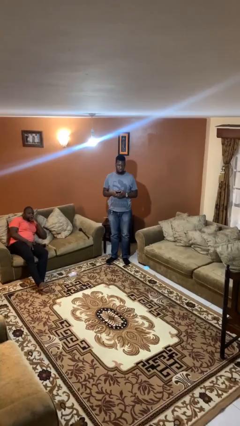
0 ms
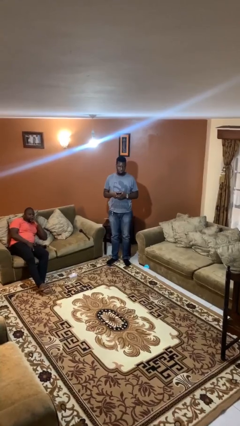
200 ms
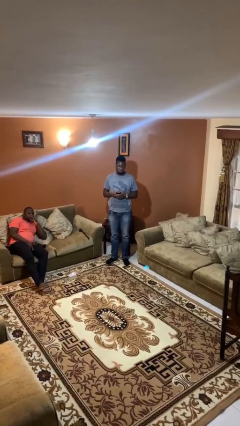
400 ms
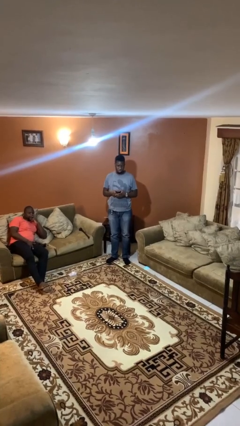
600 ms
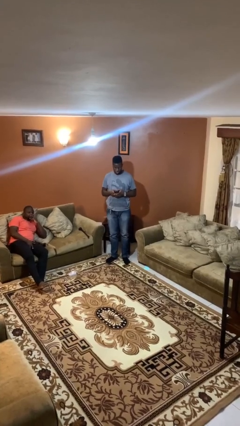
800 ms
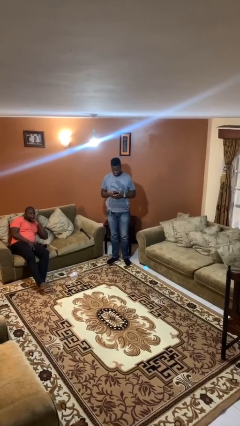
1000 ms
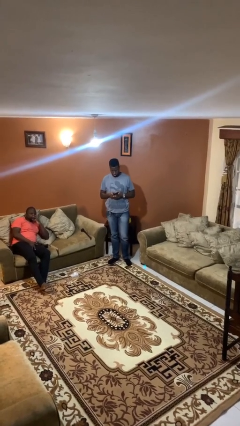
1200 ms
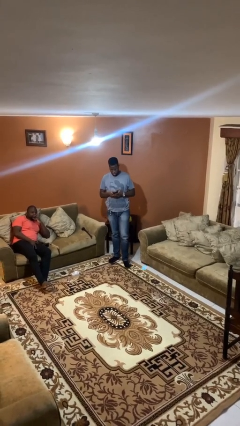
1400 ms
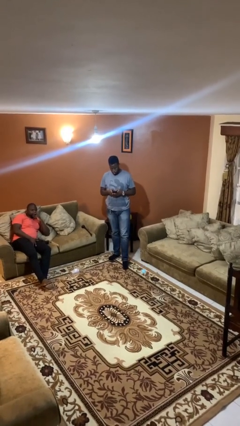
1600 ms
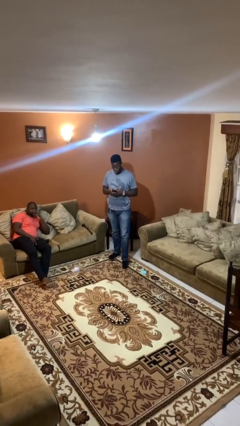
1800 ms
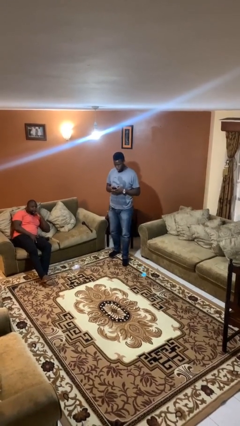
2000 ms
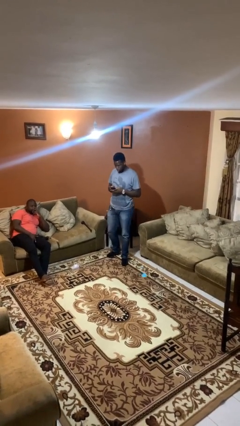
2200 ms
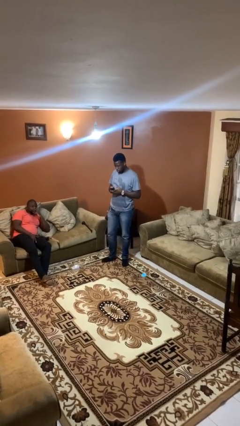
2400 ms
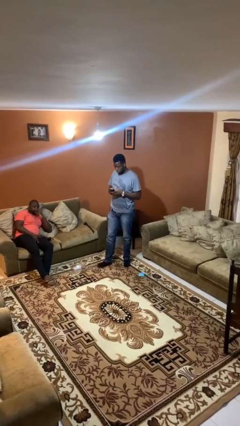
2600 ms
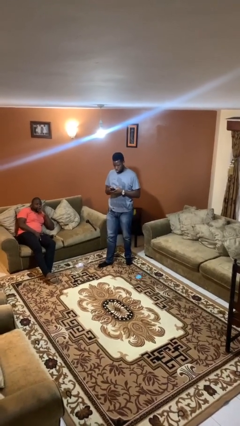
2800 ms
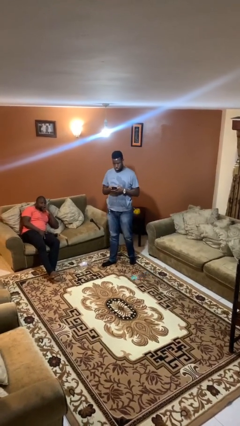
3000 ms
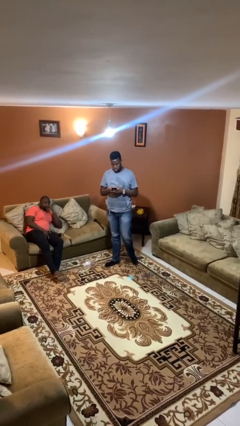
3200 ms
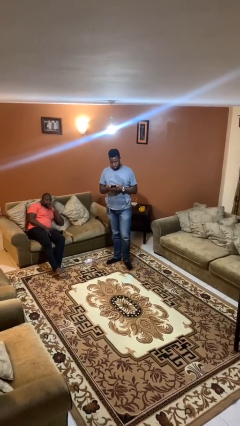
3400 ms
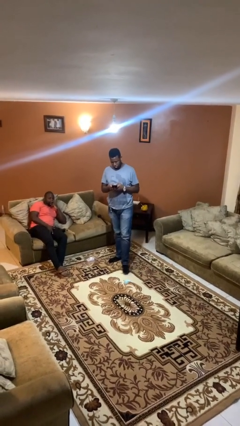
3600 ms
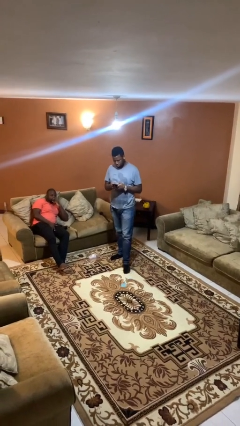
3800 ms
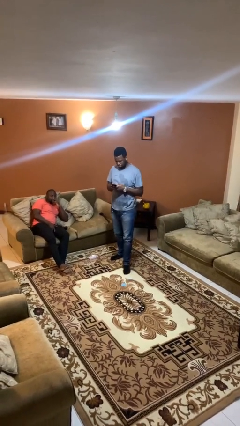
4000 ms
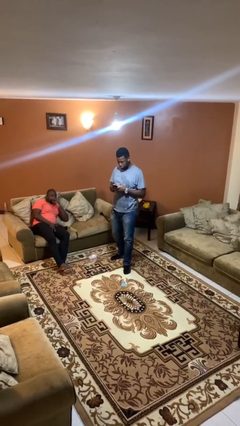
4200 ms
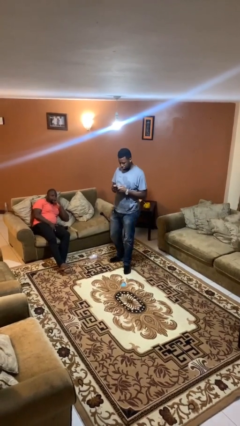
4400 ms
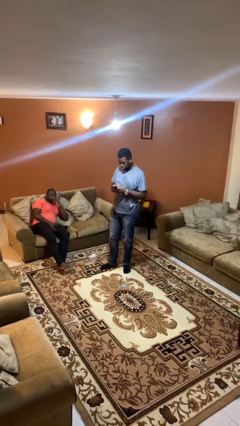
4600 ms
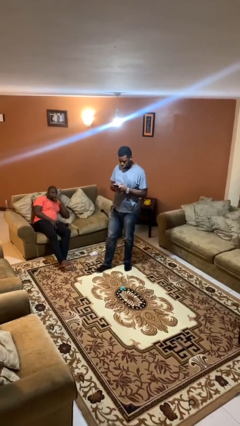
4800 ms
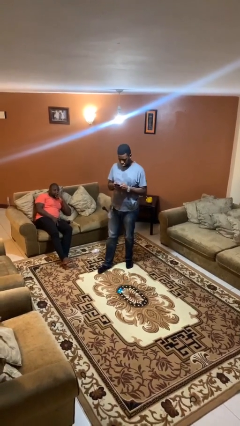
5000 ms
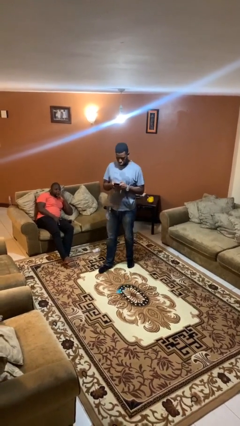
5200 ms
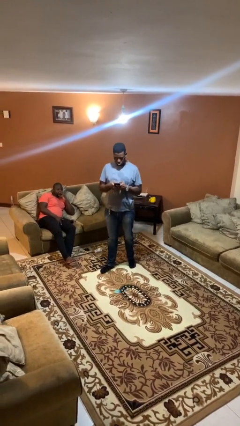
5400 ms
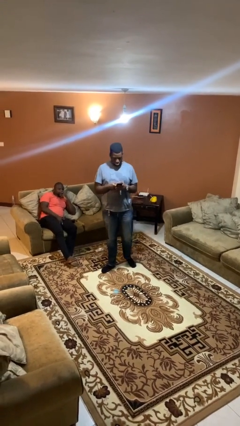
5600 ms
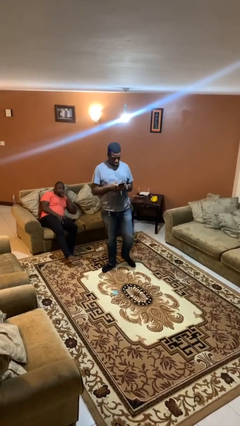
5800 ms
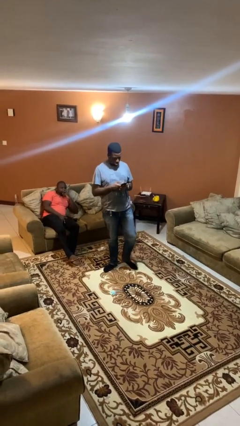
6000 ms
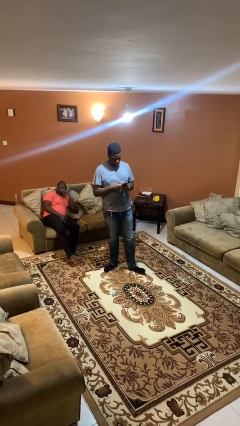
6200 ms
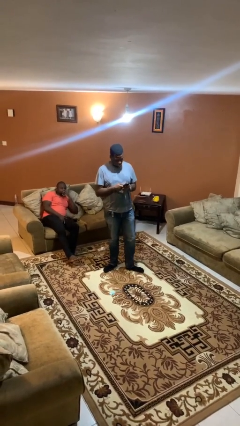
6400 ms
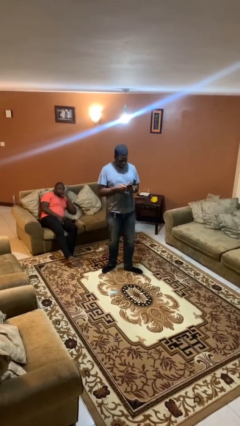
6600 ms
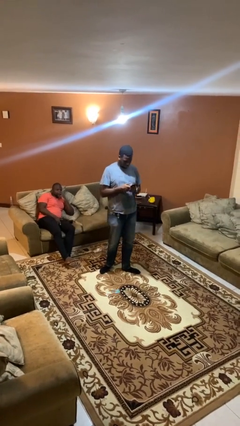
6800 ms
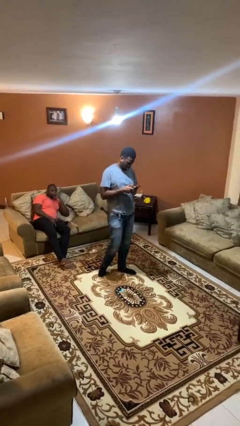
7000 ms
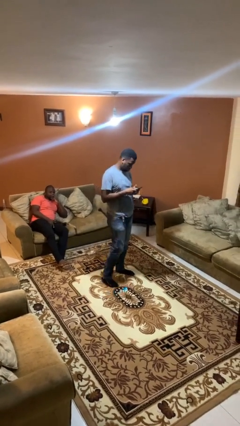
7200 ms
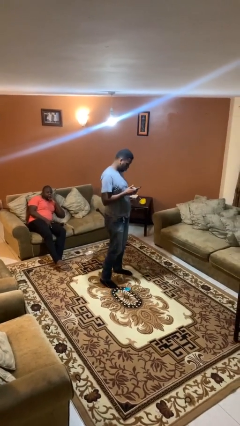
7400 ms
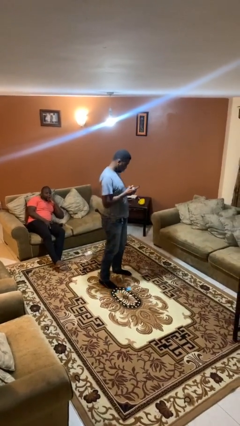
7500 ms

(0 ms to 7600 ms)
person texts on phone

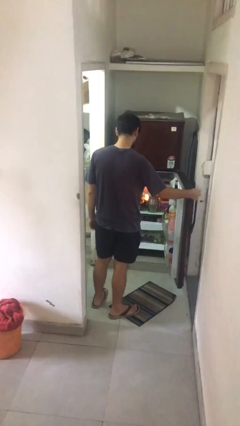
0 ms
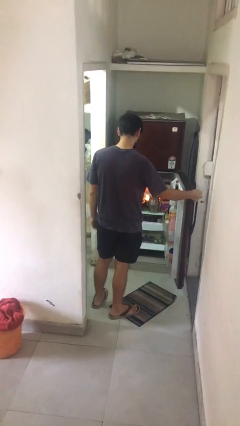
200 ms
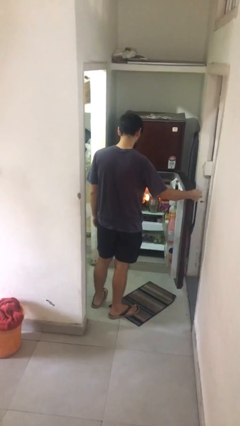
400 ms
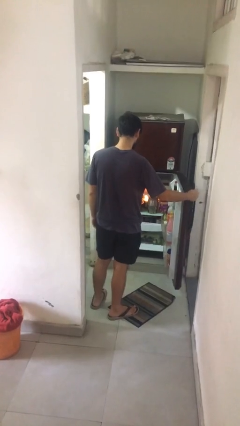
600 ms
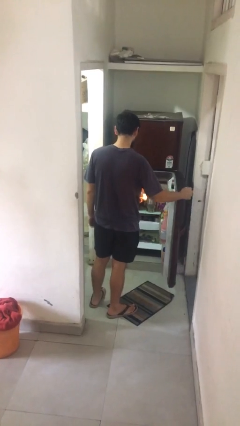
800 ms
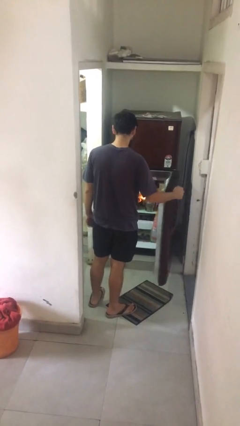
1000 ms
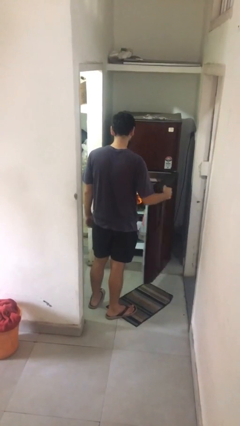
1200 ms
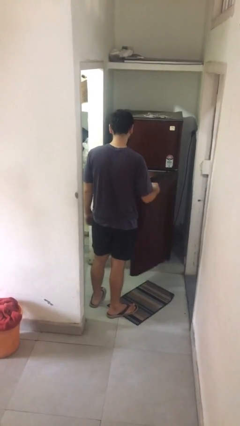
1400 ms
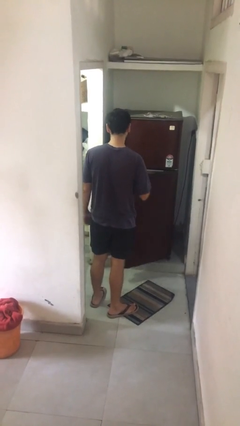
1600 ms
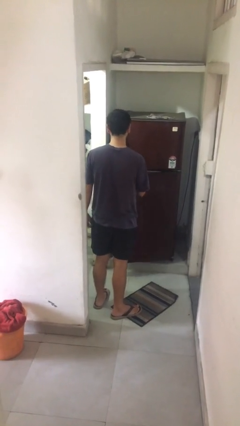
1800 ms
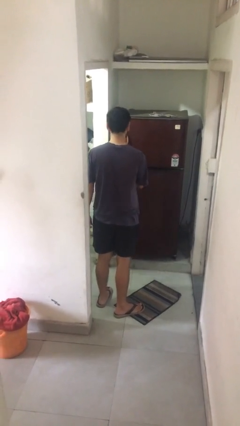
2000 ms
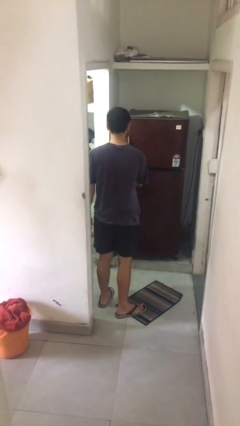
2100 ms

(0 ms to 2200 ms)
person closes refrigerator

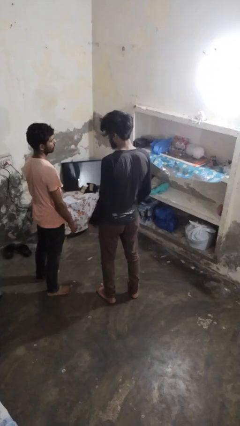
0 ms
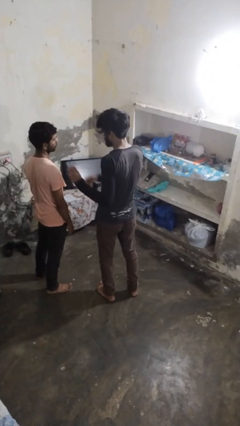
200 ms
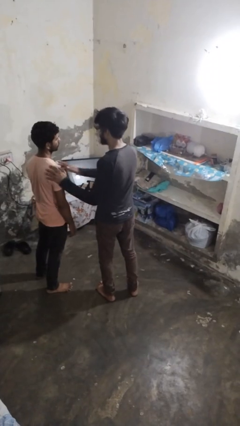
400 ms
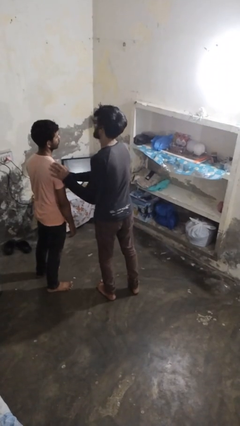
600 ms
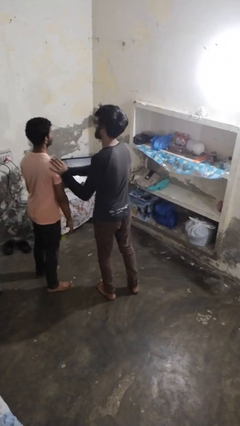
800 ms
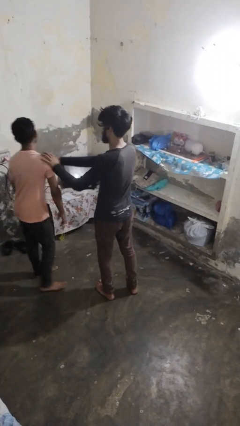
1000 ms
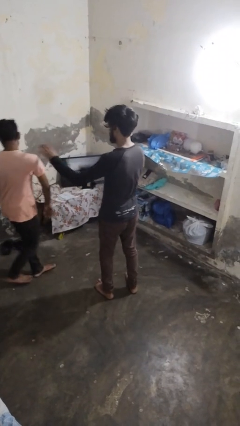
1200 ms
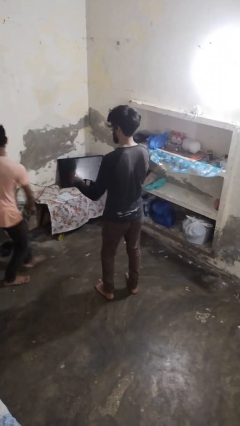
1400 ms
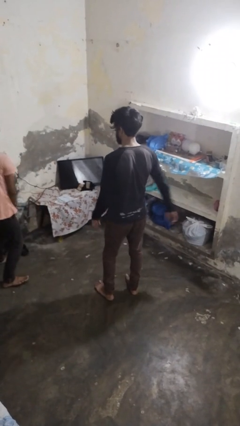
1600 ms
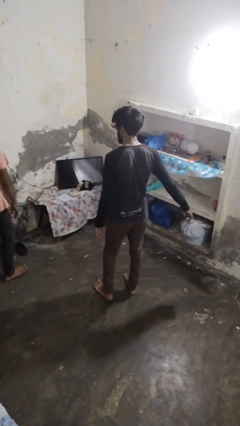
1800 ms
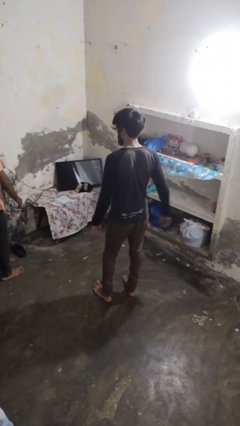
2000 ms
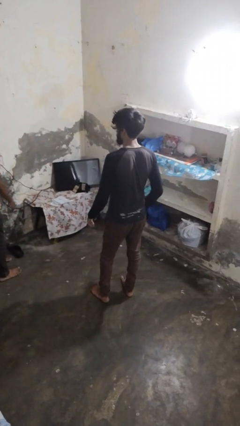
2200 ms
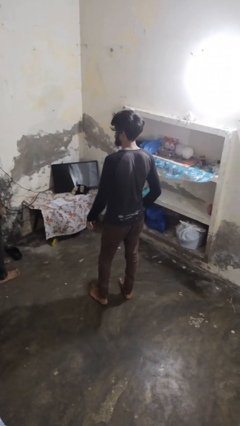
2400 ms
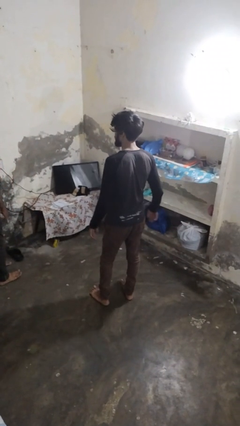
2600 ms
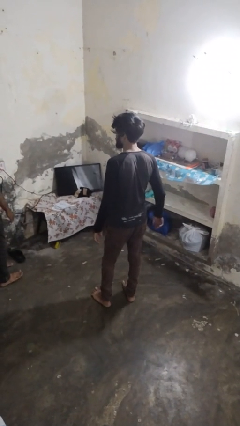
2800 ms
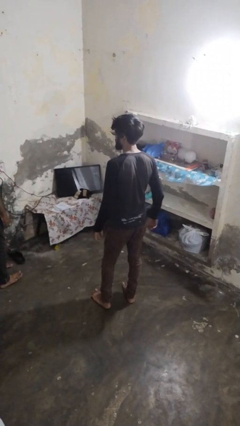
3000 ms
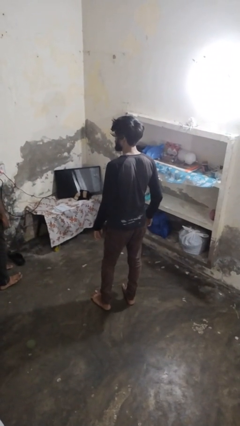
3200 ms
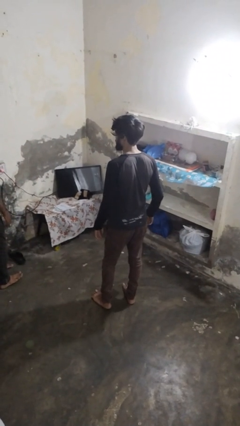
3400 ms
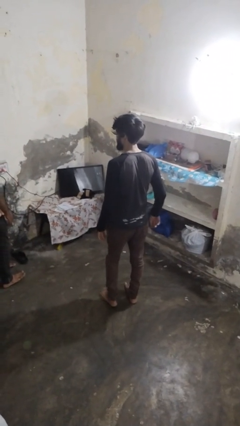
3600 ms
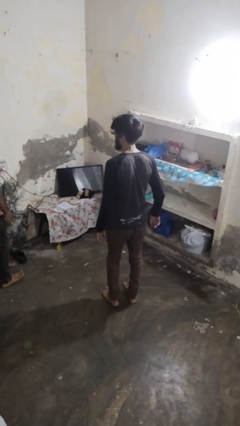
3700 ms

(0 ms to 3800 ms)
person shoves person

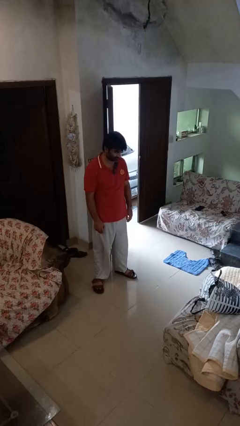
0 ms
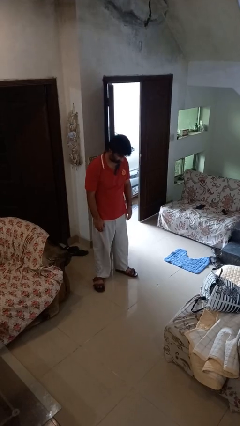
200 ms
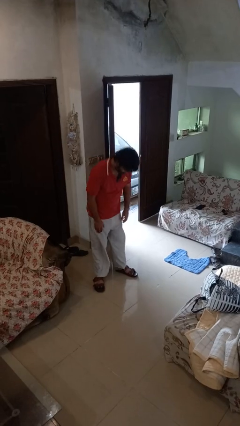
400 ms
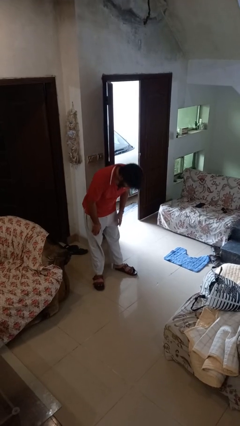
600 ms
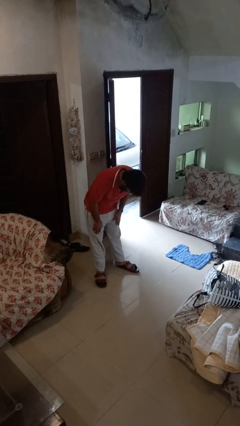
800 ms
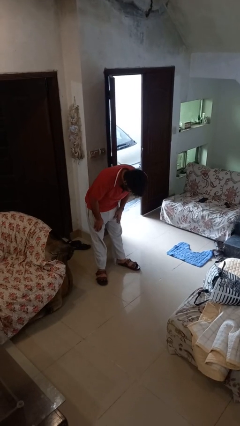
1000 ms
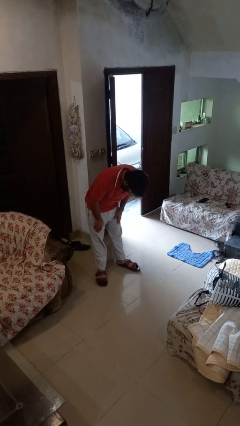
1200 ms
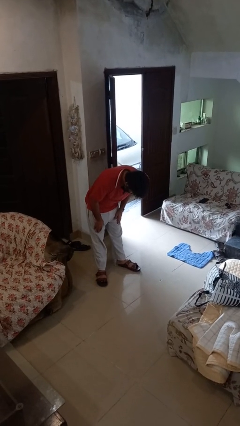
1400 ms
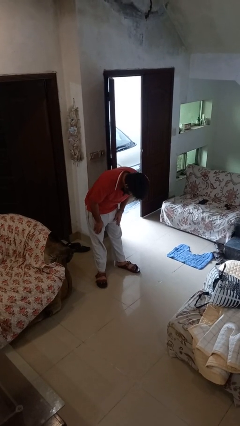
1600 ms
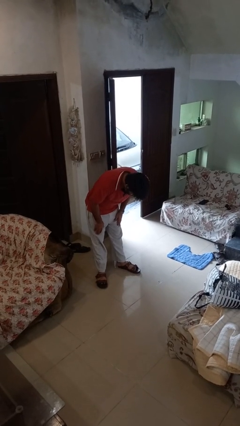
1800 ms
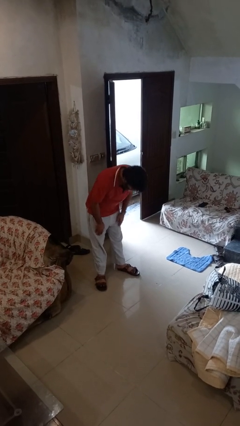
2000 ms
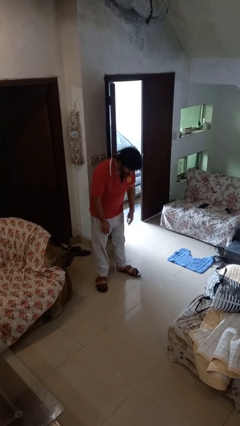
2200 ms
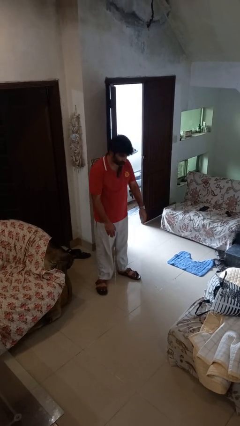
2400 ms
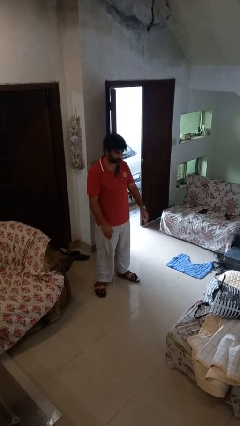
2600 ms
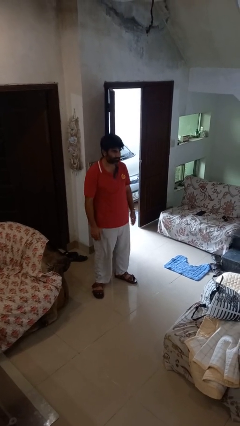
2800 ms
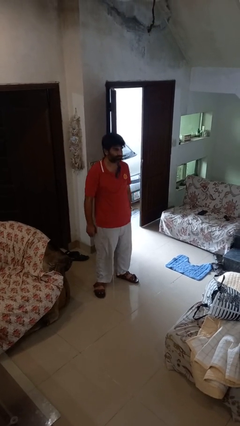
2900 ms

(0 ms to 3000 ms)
person bows

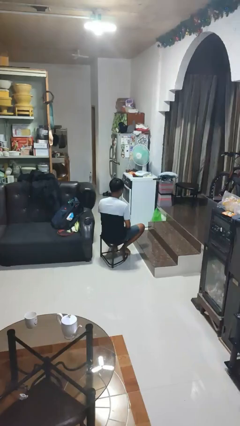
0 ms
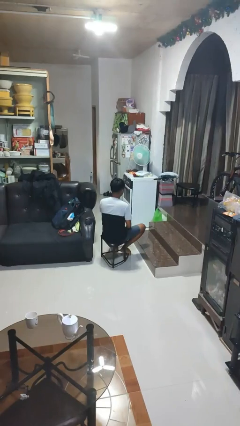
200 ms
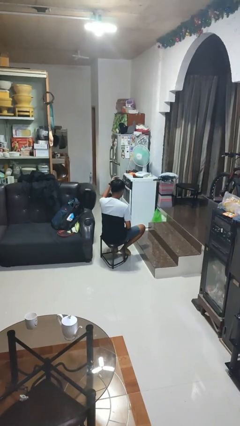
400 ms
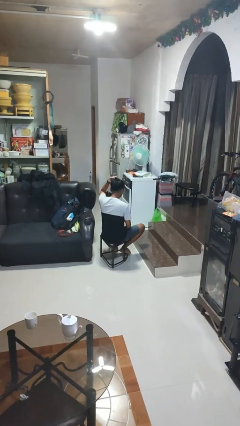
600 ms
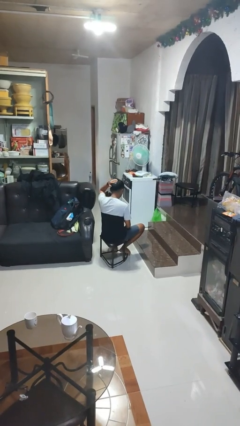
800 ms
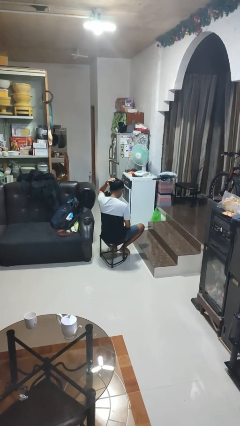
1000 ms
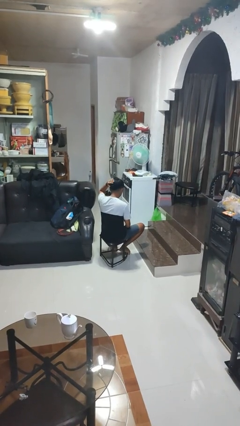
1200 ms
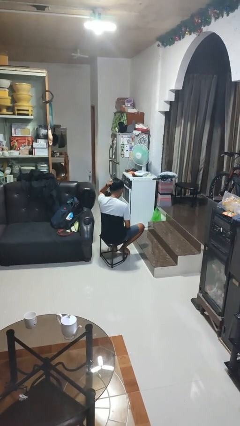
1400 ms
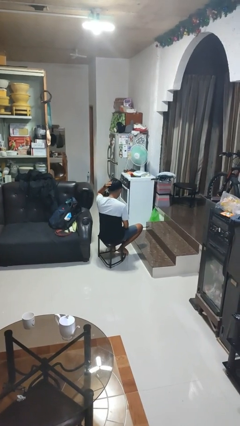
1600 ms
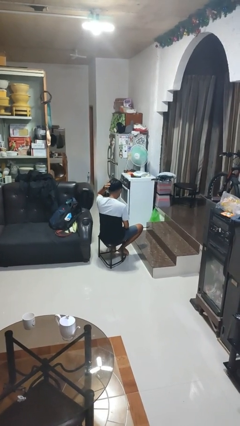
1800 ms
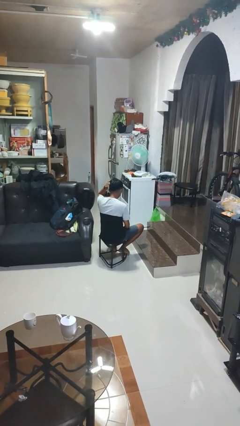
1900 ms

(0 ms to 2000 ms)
person pats head
